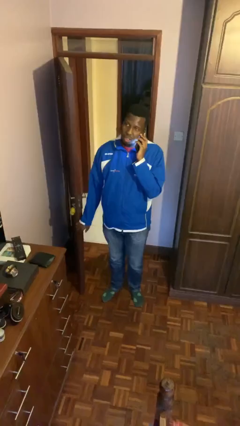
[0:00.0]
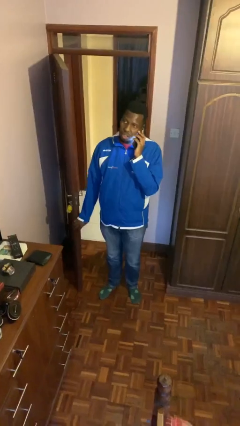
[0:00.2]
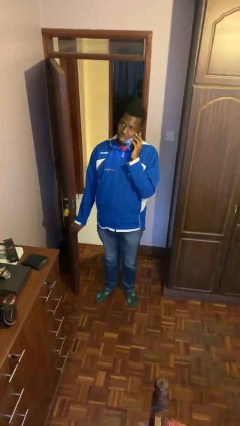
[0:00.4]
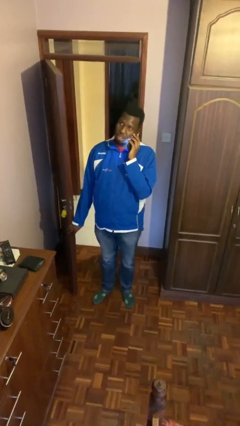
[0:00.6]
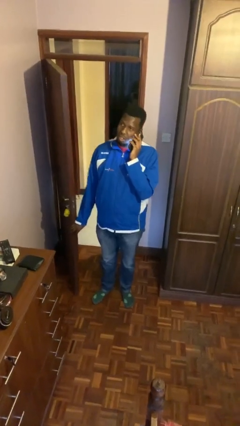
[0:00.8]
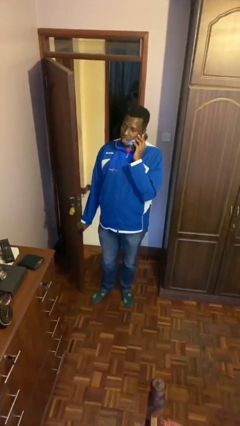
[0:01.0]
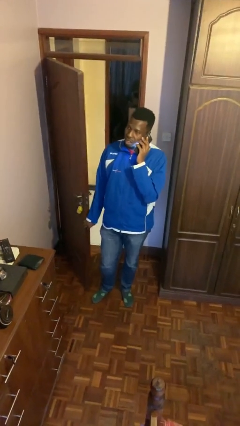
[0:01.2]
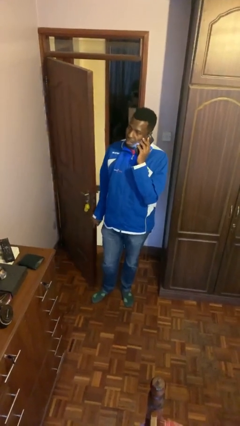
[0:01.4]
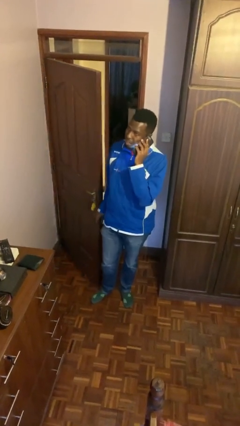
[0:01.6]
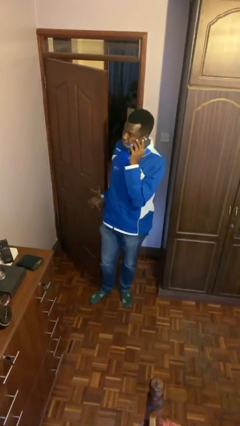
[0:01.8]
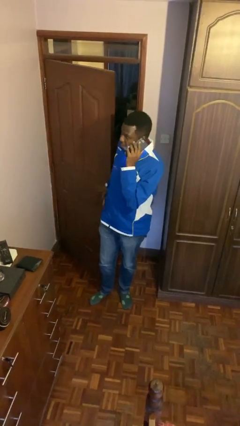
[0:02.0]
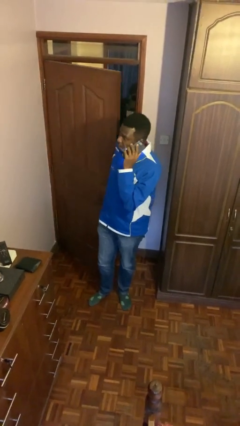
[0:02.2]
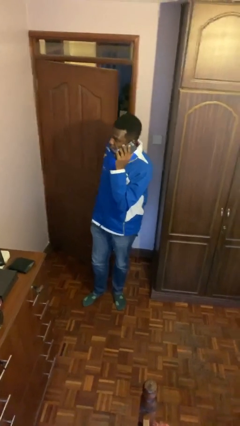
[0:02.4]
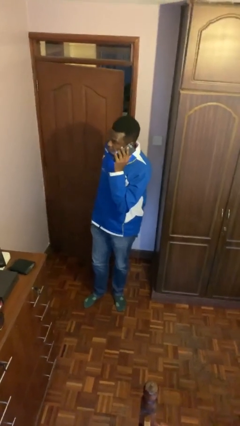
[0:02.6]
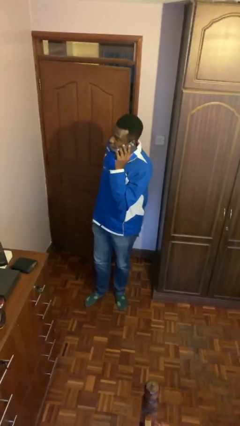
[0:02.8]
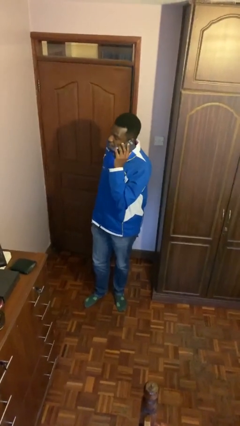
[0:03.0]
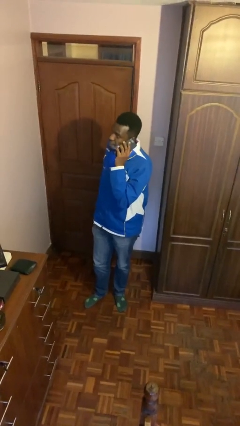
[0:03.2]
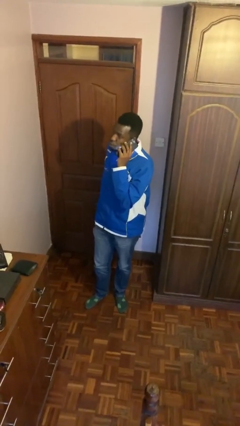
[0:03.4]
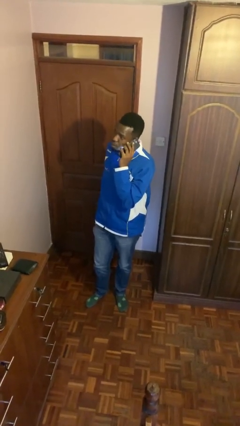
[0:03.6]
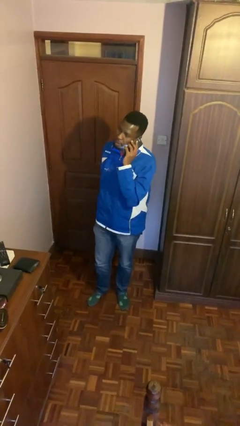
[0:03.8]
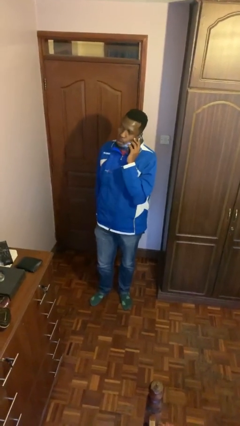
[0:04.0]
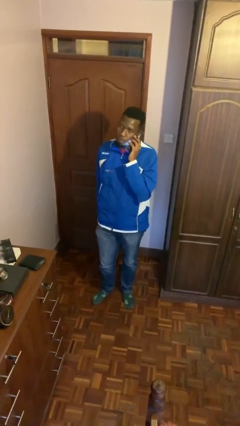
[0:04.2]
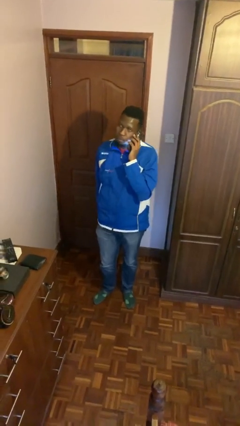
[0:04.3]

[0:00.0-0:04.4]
person closes facility door

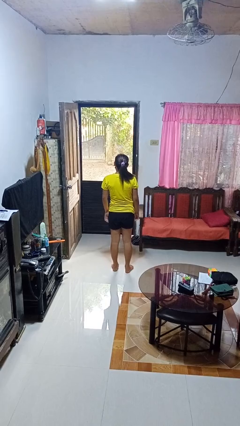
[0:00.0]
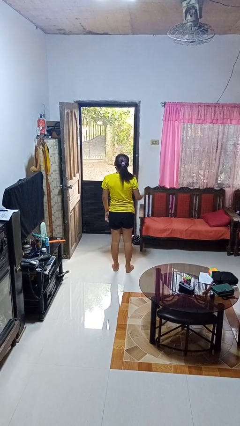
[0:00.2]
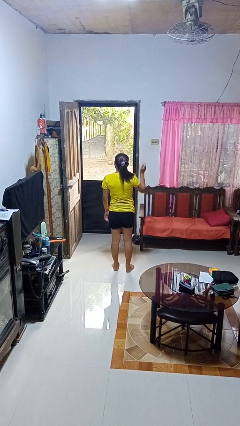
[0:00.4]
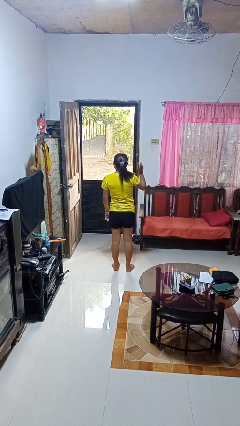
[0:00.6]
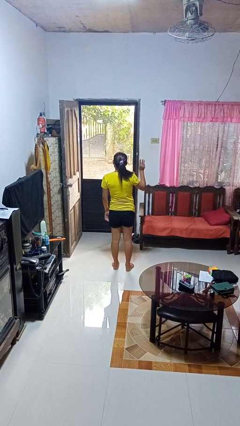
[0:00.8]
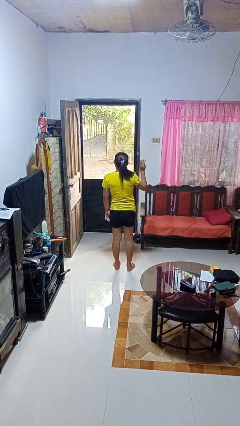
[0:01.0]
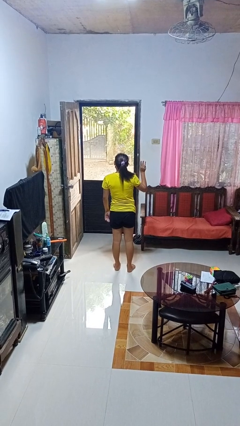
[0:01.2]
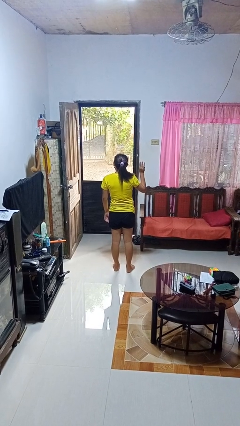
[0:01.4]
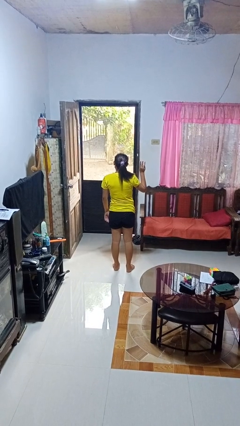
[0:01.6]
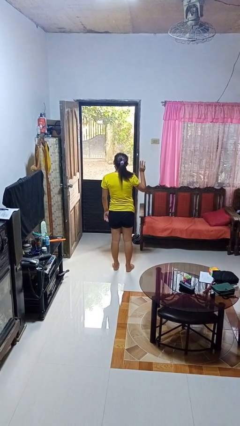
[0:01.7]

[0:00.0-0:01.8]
person gestures number three

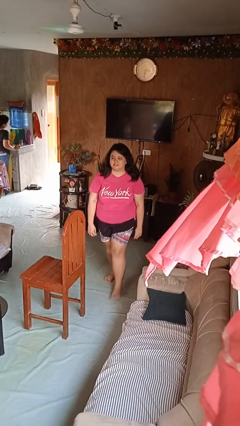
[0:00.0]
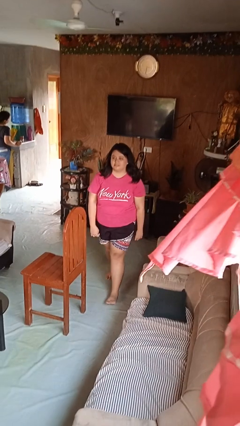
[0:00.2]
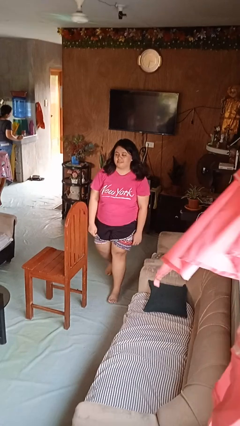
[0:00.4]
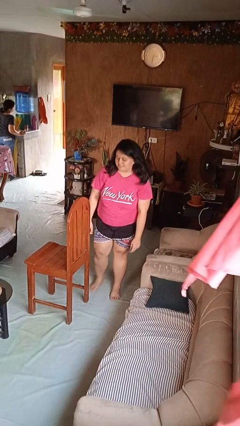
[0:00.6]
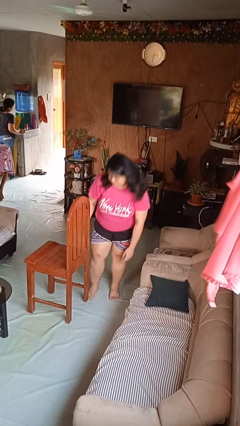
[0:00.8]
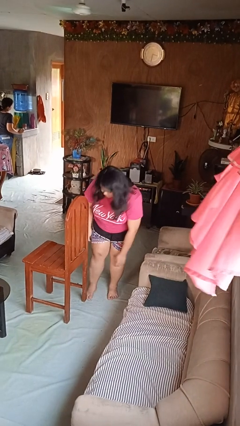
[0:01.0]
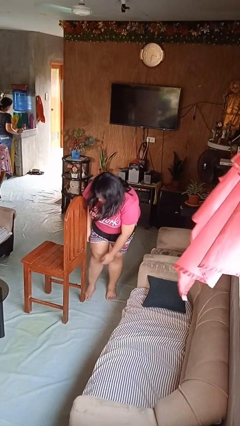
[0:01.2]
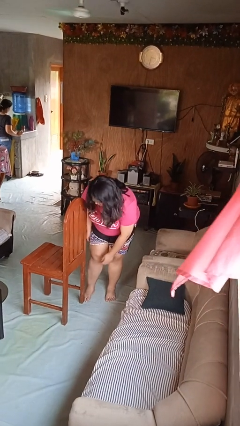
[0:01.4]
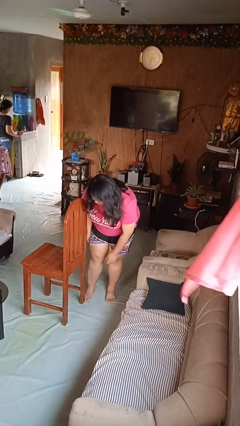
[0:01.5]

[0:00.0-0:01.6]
person stubs toe

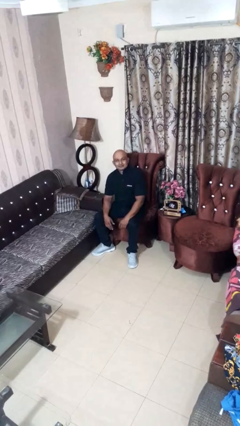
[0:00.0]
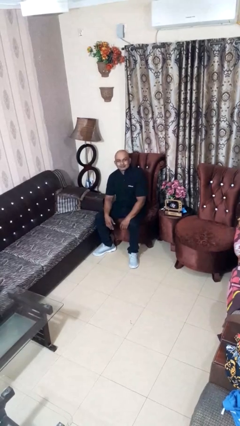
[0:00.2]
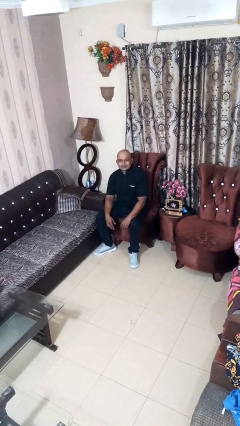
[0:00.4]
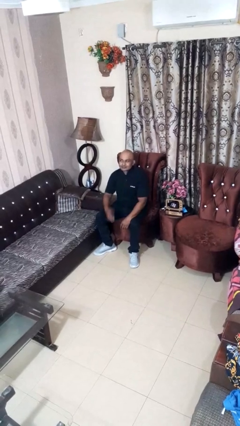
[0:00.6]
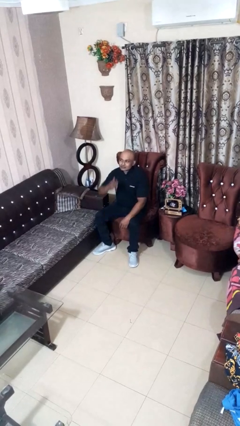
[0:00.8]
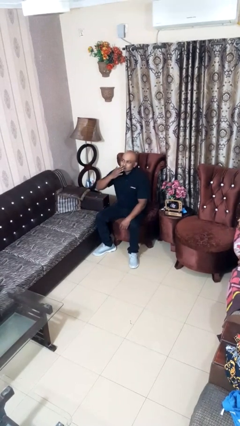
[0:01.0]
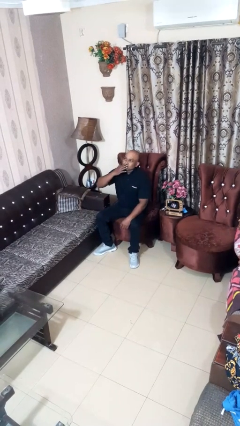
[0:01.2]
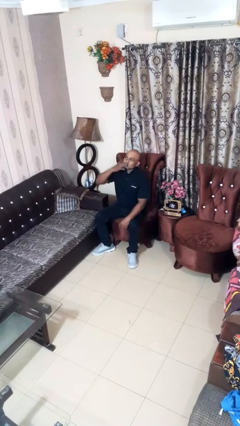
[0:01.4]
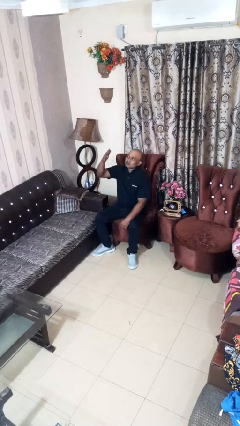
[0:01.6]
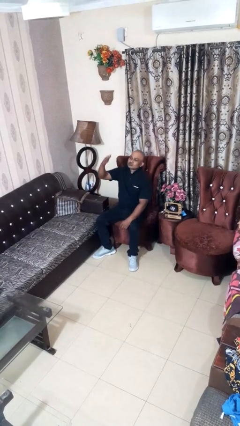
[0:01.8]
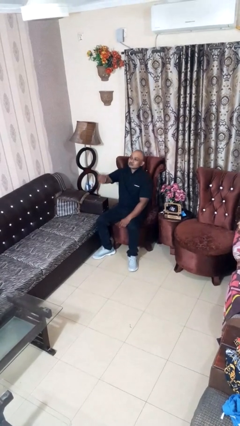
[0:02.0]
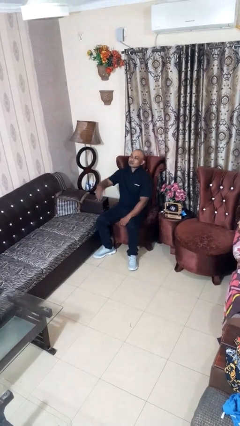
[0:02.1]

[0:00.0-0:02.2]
person gestures blow kiss

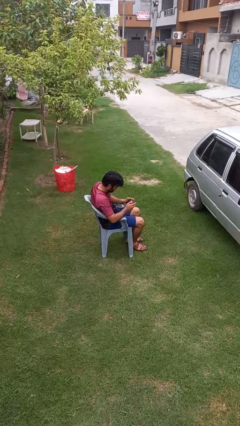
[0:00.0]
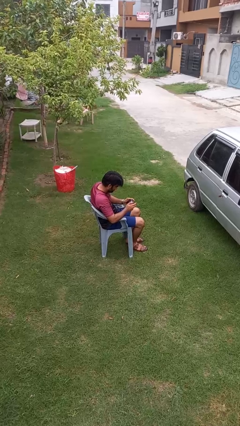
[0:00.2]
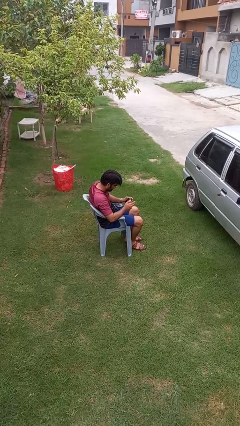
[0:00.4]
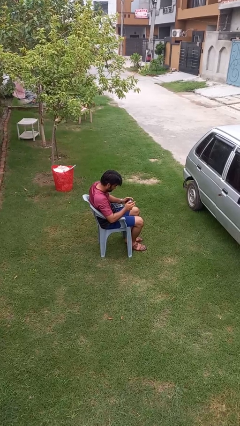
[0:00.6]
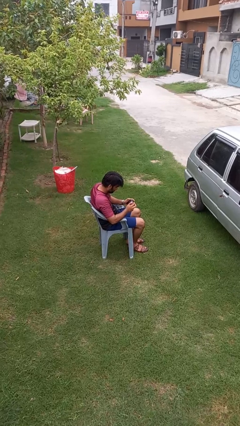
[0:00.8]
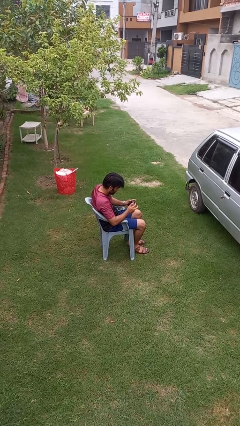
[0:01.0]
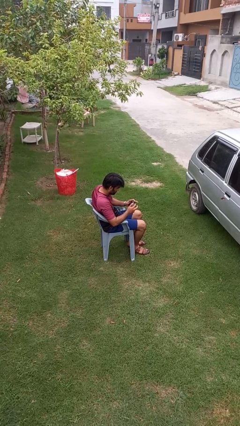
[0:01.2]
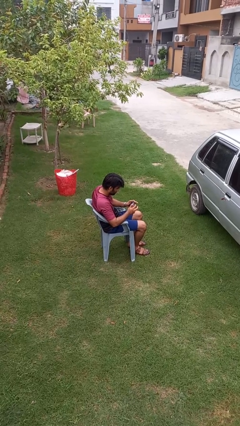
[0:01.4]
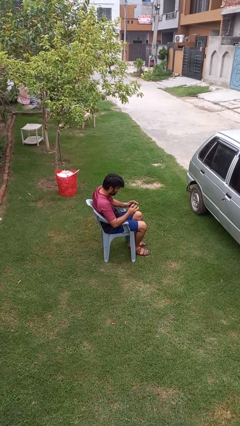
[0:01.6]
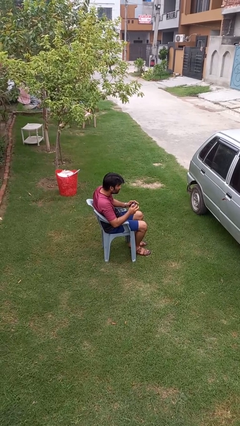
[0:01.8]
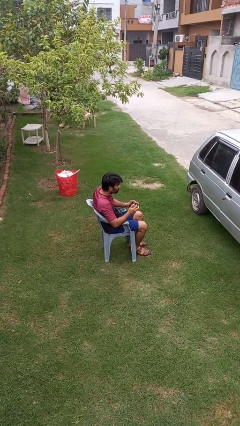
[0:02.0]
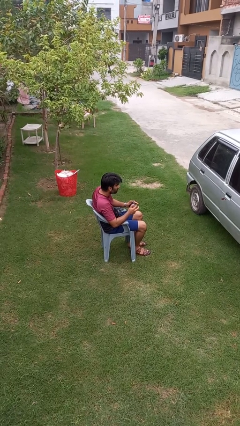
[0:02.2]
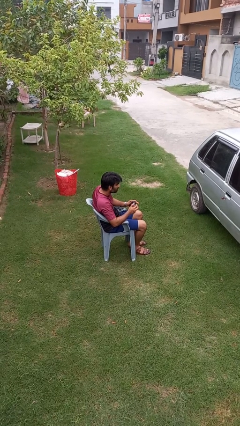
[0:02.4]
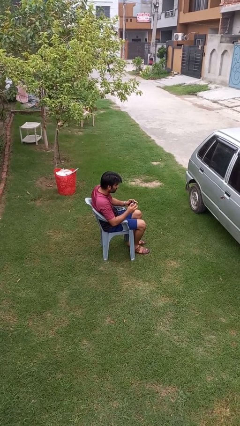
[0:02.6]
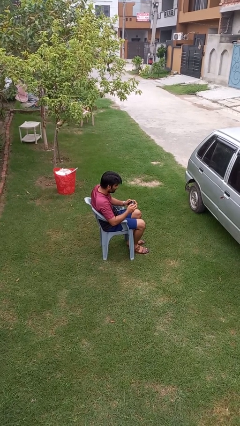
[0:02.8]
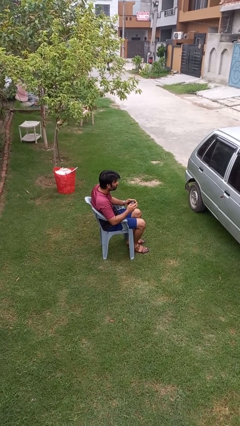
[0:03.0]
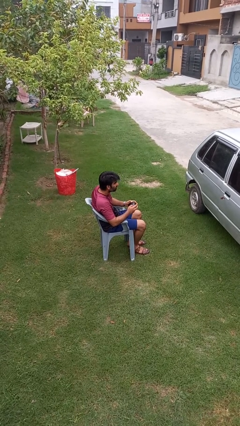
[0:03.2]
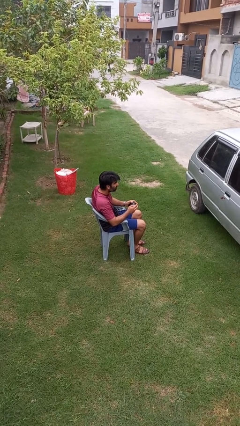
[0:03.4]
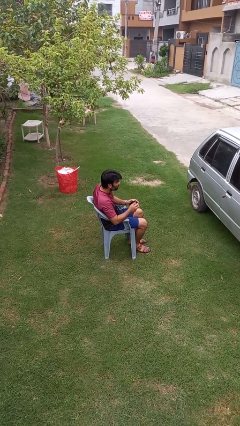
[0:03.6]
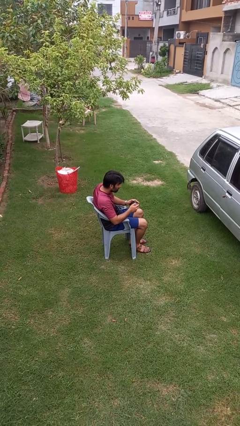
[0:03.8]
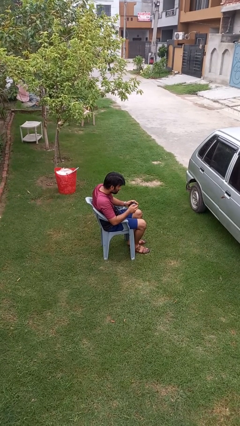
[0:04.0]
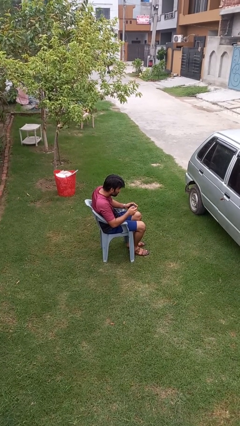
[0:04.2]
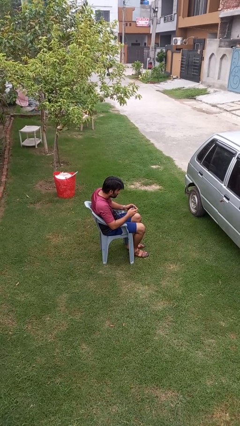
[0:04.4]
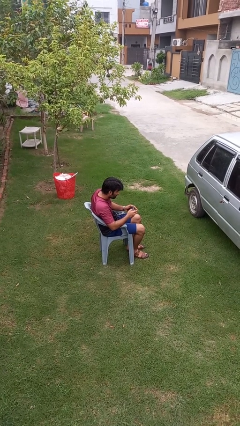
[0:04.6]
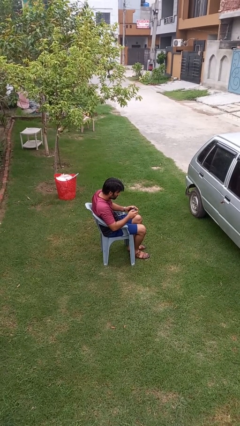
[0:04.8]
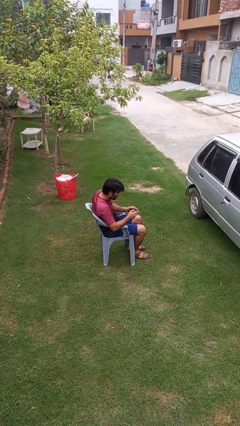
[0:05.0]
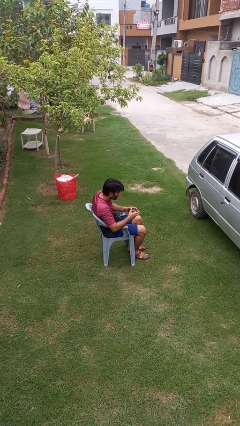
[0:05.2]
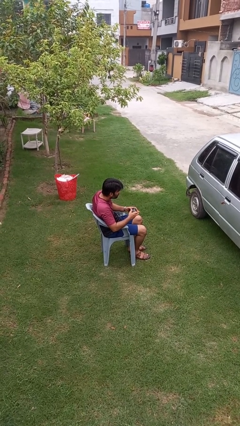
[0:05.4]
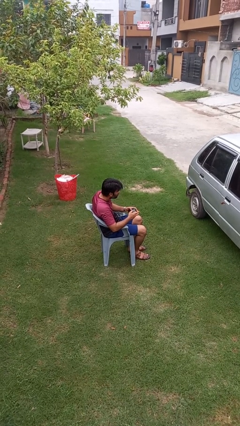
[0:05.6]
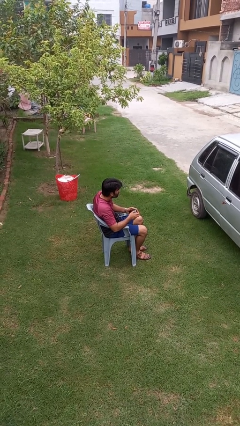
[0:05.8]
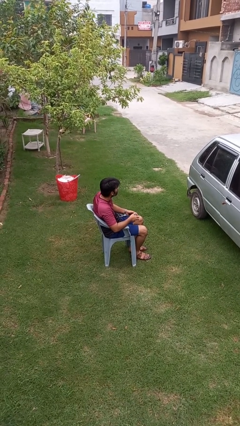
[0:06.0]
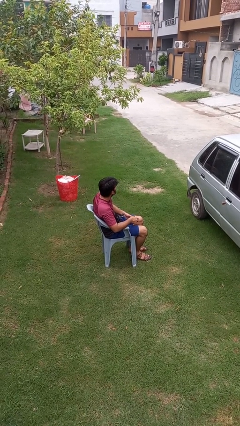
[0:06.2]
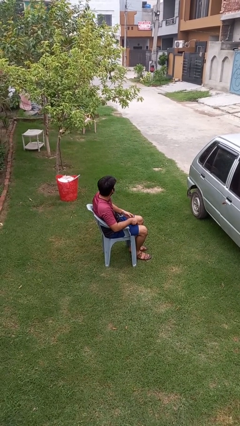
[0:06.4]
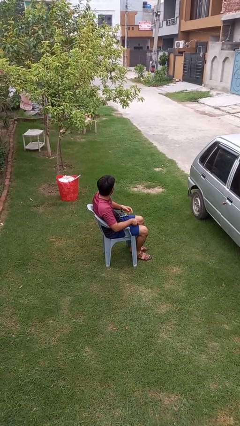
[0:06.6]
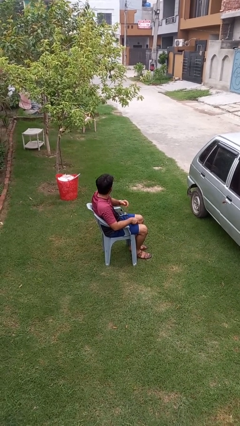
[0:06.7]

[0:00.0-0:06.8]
person interacts with handheld game

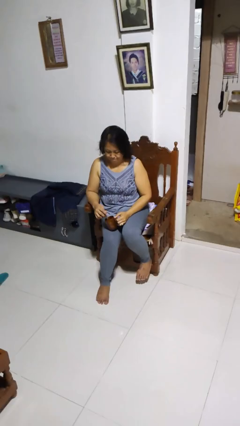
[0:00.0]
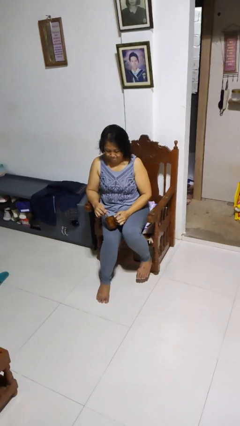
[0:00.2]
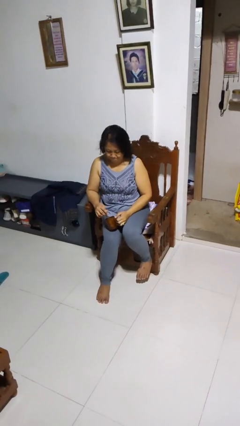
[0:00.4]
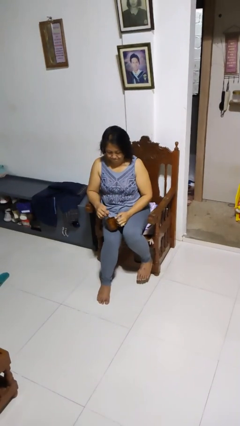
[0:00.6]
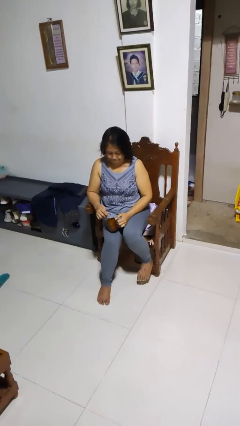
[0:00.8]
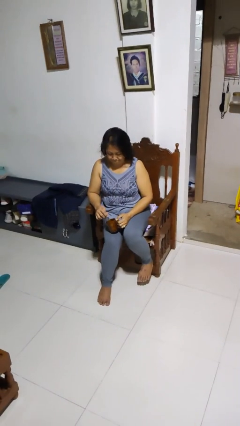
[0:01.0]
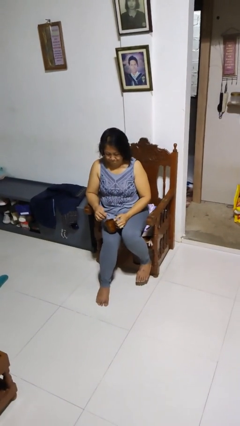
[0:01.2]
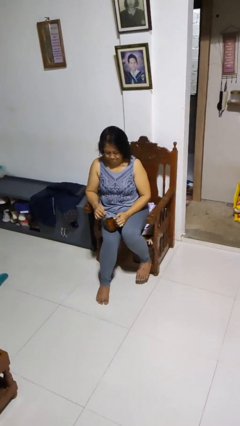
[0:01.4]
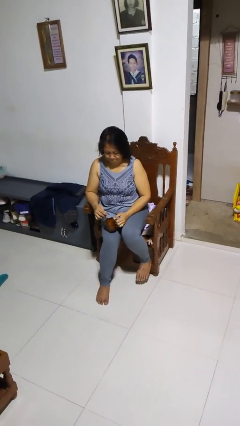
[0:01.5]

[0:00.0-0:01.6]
person stirs mug
